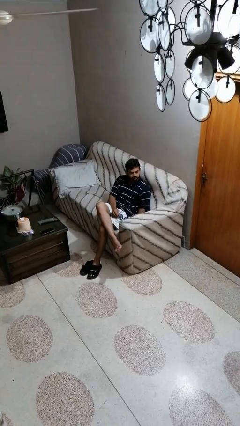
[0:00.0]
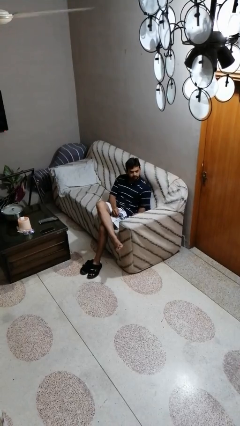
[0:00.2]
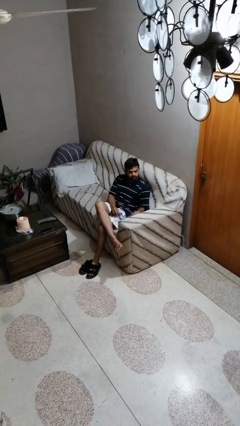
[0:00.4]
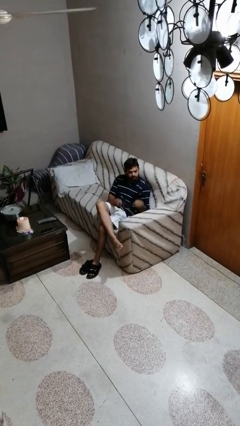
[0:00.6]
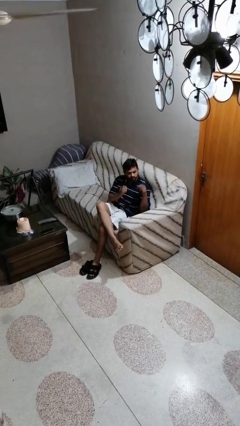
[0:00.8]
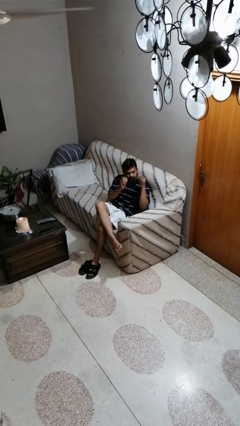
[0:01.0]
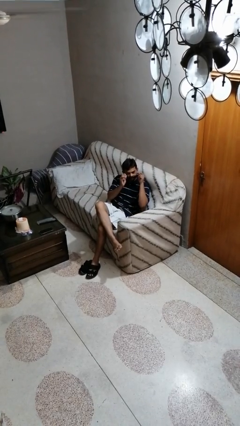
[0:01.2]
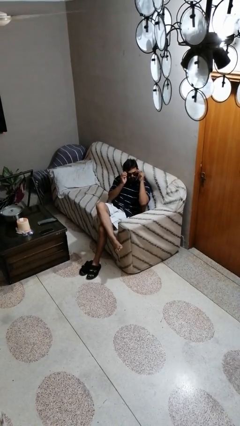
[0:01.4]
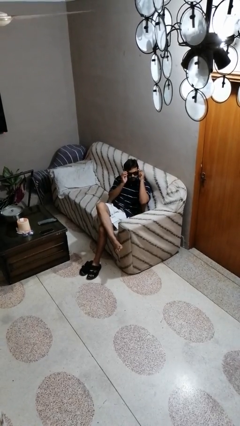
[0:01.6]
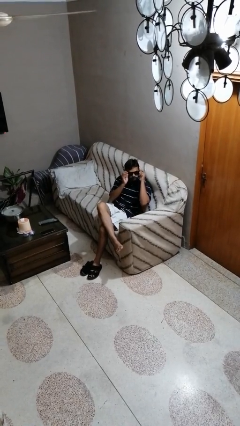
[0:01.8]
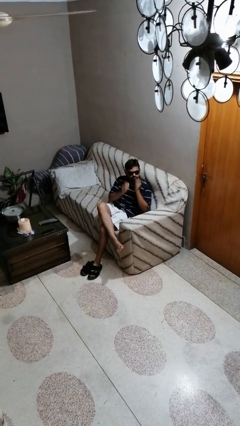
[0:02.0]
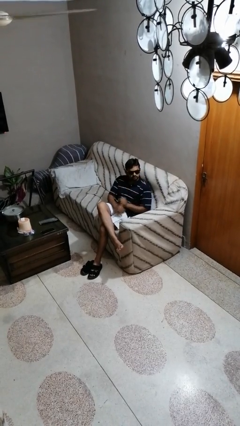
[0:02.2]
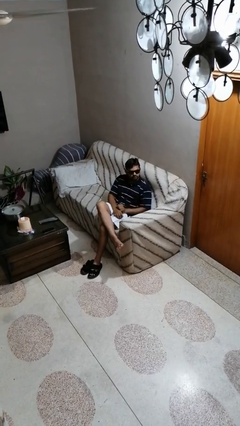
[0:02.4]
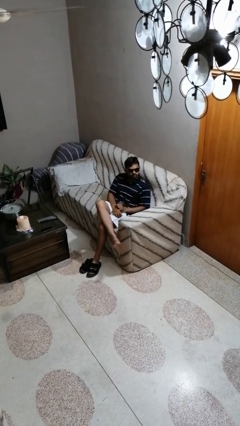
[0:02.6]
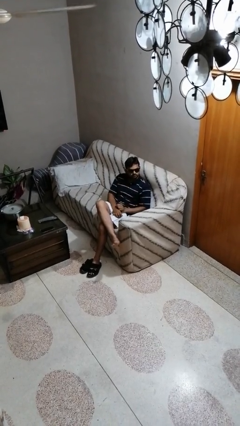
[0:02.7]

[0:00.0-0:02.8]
person puts on sunglasses

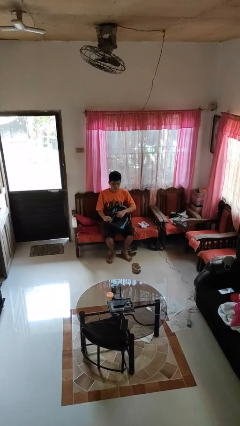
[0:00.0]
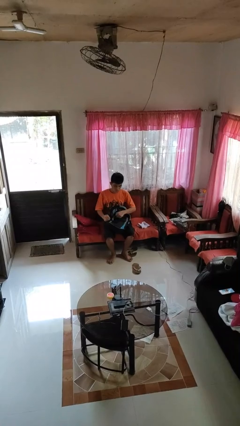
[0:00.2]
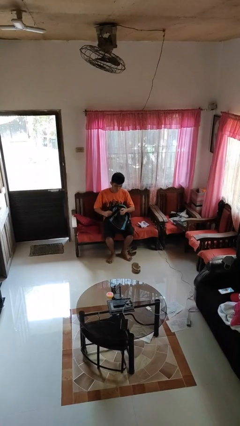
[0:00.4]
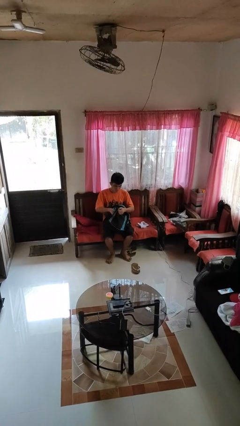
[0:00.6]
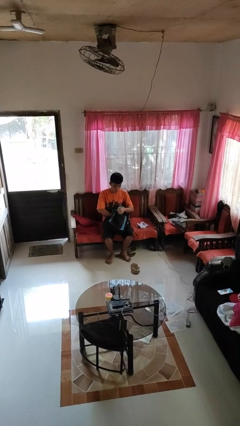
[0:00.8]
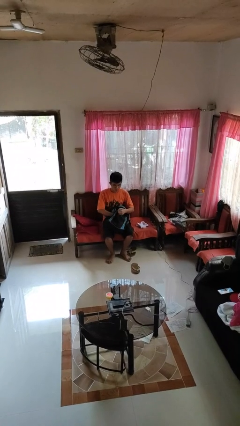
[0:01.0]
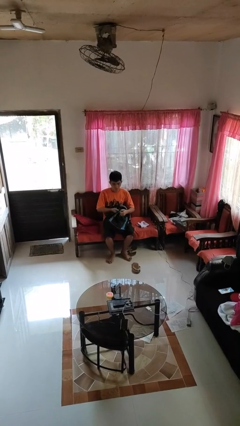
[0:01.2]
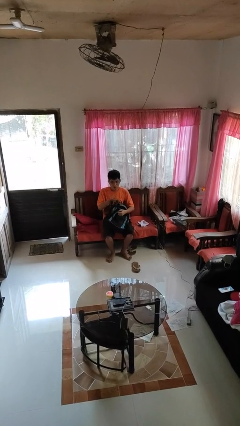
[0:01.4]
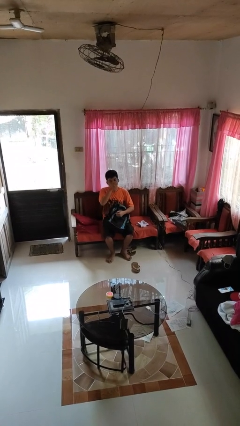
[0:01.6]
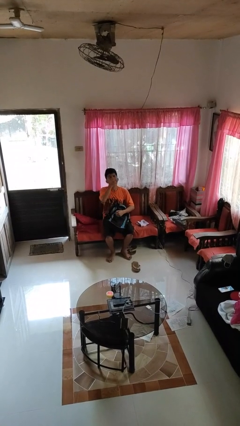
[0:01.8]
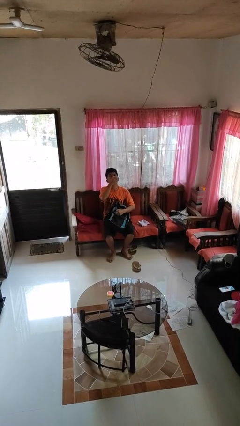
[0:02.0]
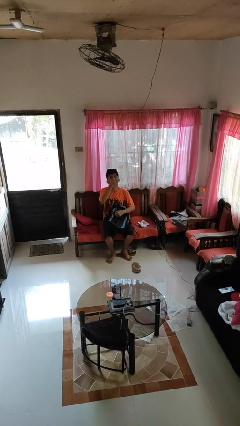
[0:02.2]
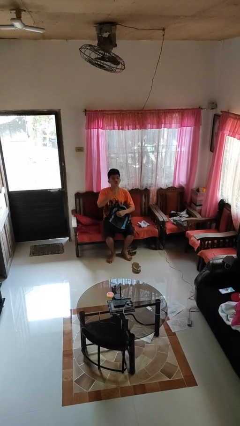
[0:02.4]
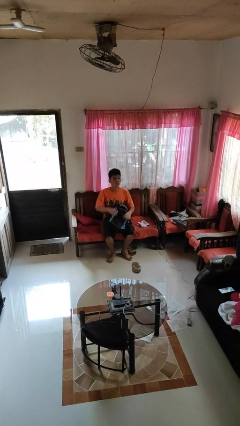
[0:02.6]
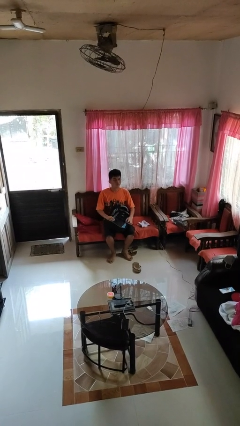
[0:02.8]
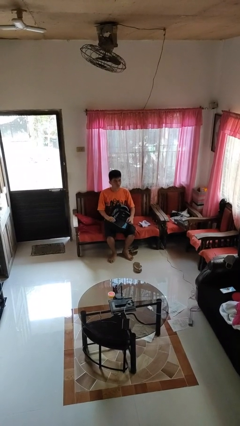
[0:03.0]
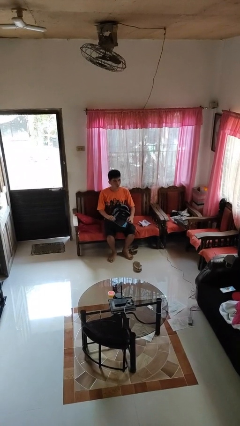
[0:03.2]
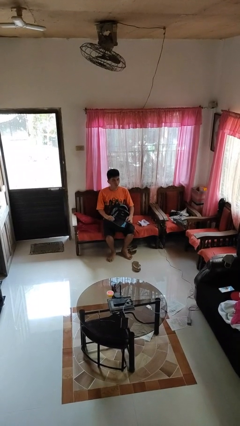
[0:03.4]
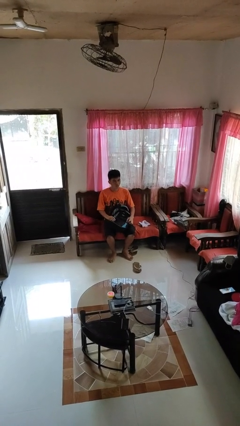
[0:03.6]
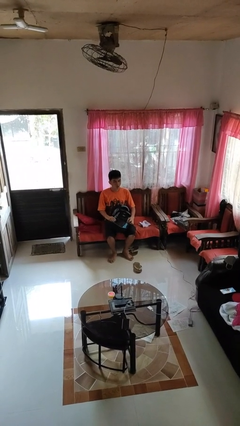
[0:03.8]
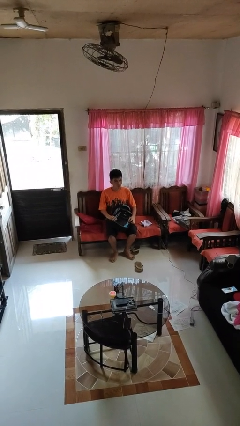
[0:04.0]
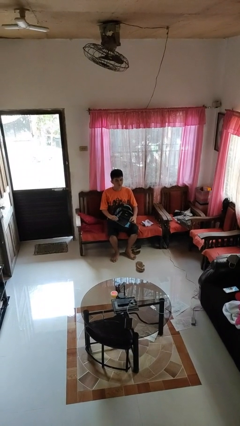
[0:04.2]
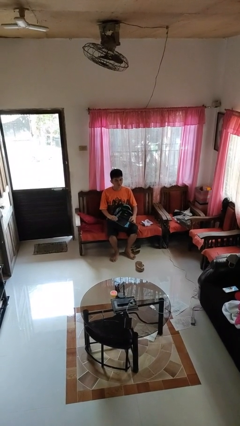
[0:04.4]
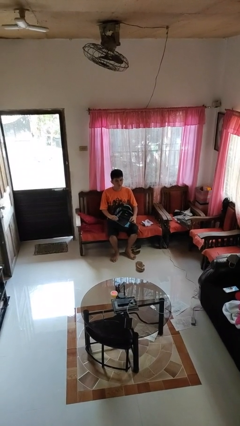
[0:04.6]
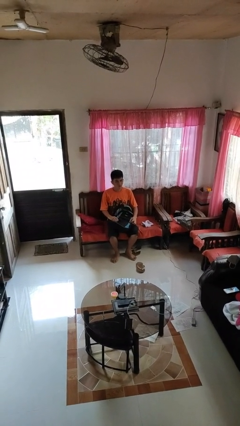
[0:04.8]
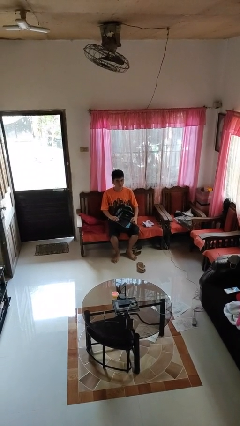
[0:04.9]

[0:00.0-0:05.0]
person eats snack from bag

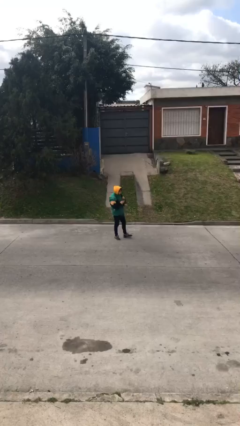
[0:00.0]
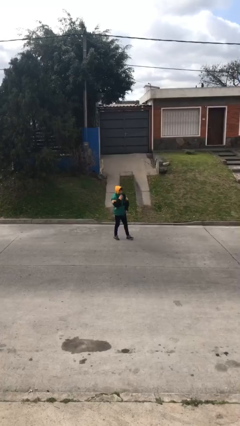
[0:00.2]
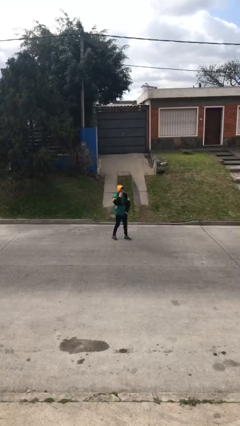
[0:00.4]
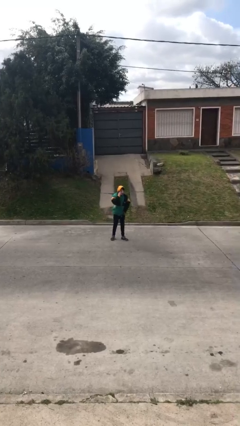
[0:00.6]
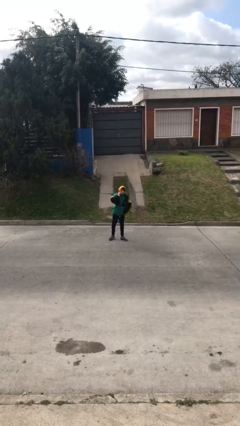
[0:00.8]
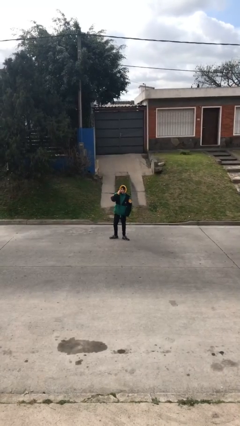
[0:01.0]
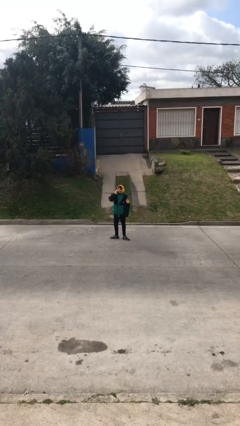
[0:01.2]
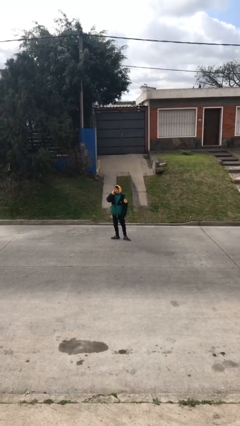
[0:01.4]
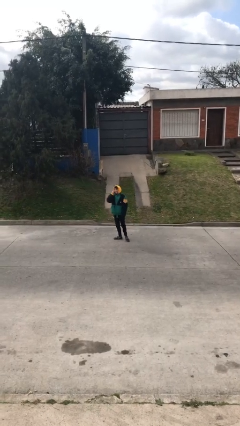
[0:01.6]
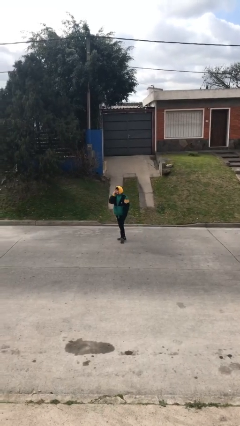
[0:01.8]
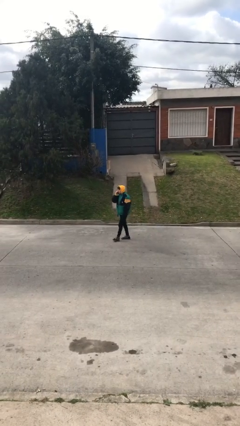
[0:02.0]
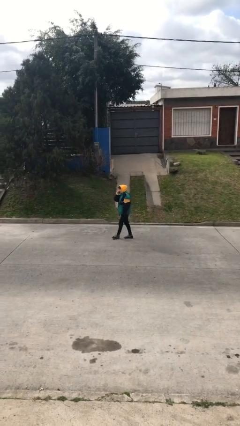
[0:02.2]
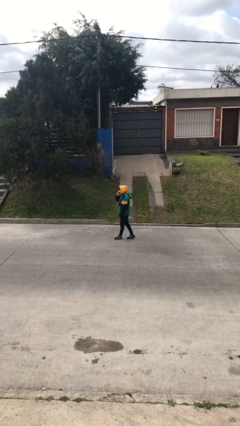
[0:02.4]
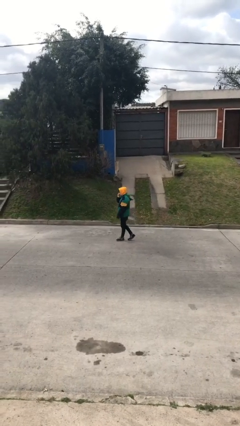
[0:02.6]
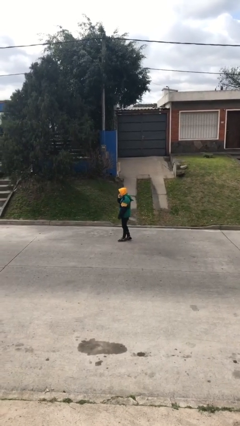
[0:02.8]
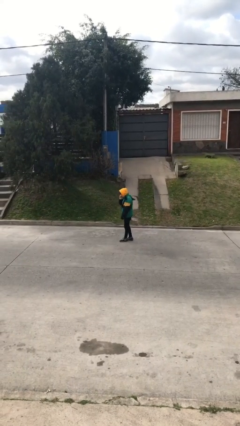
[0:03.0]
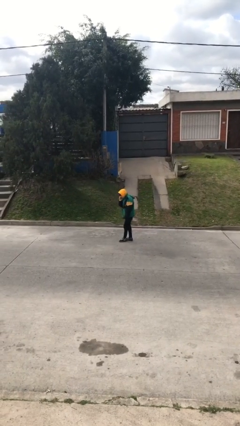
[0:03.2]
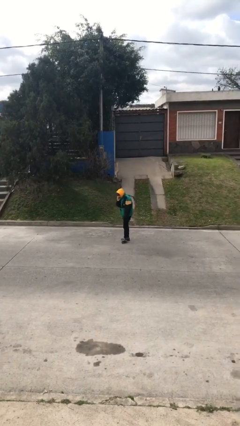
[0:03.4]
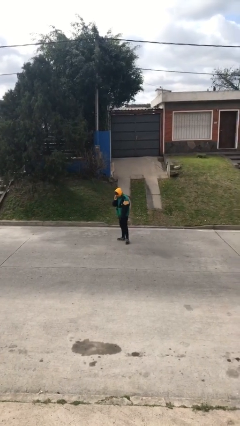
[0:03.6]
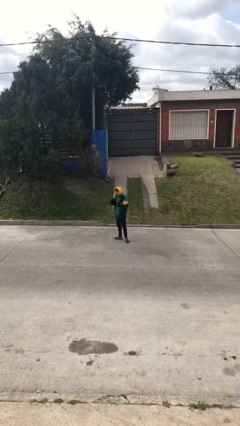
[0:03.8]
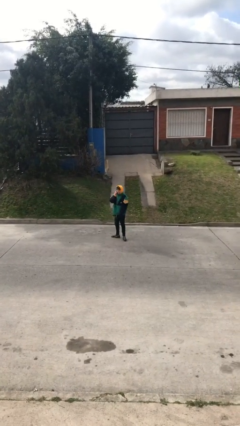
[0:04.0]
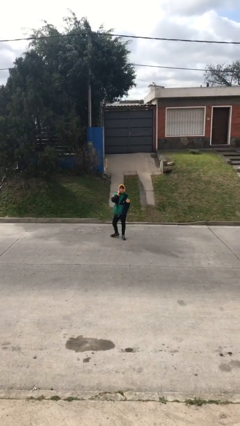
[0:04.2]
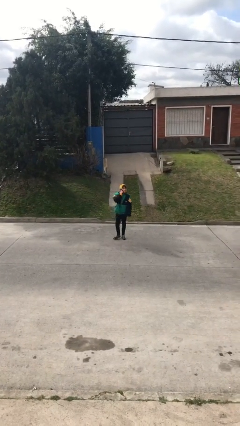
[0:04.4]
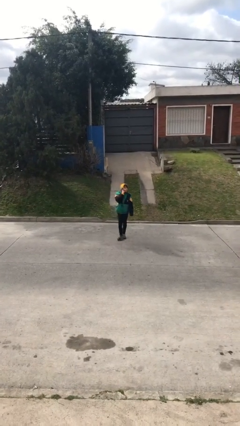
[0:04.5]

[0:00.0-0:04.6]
person talks on phone

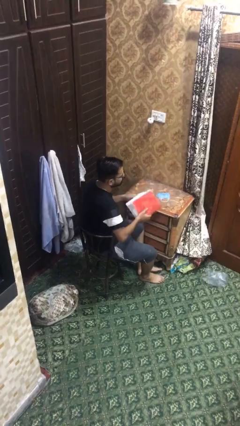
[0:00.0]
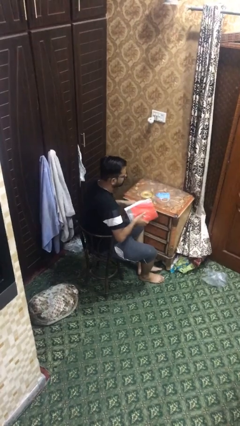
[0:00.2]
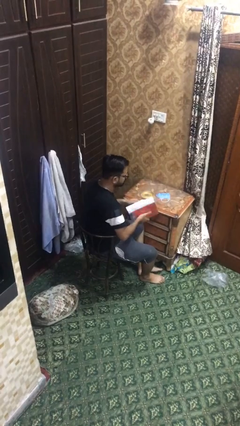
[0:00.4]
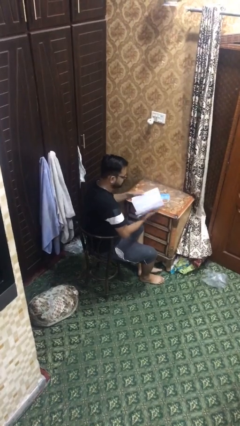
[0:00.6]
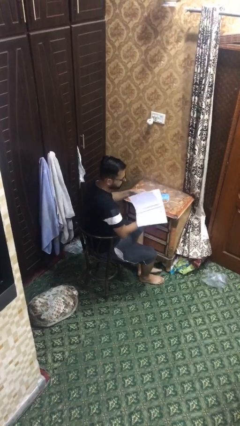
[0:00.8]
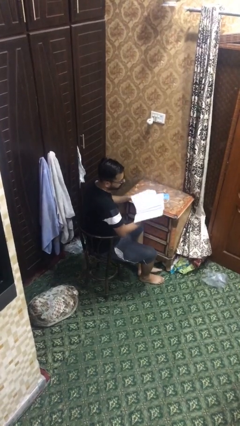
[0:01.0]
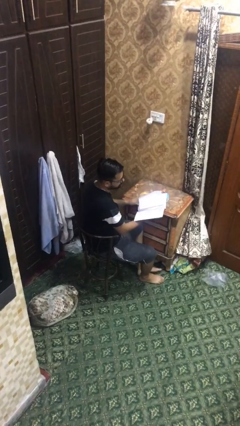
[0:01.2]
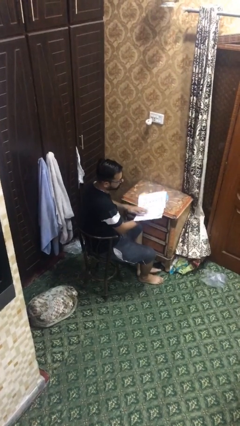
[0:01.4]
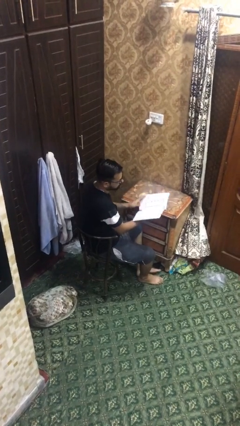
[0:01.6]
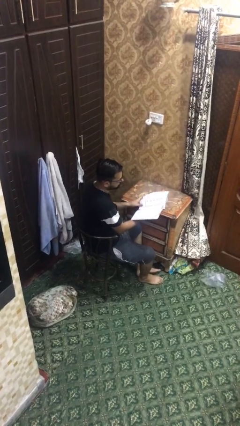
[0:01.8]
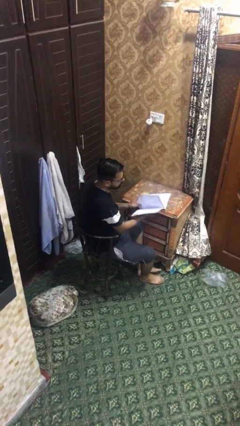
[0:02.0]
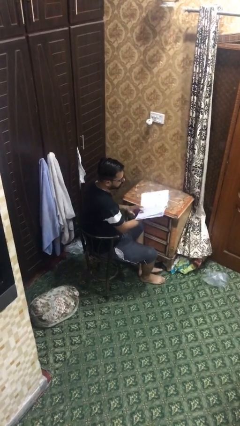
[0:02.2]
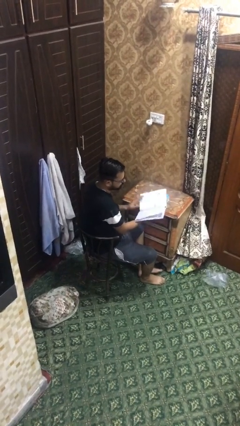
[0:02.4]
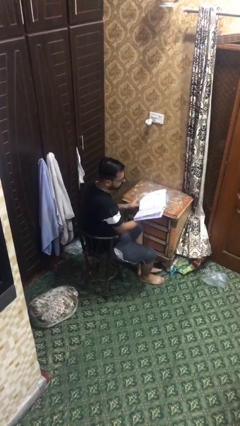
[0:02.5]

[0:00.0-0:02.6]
person reads document

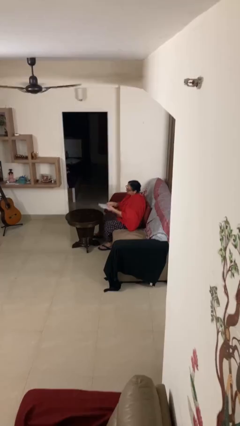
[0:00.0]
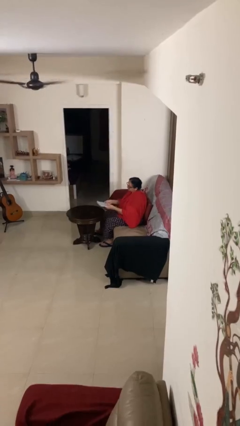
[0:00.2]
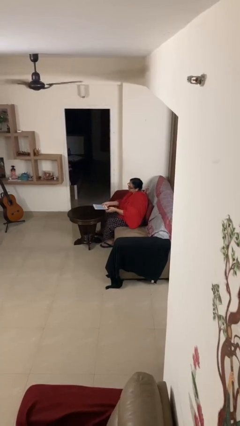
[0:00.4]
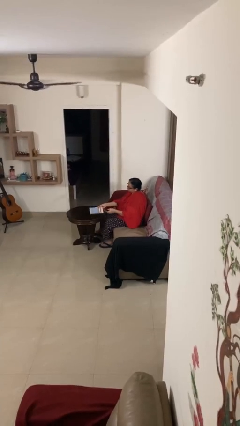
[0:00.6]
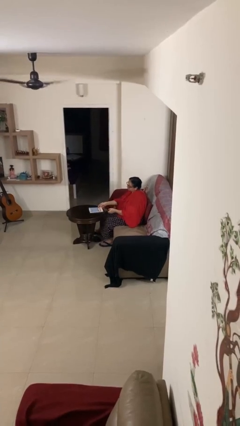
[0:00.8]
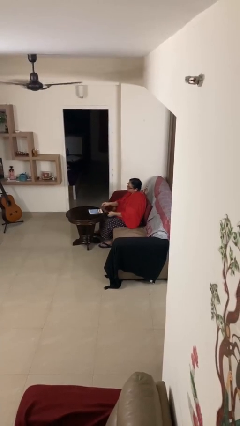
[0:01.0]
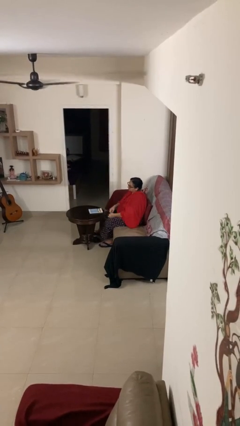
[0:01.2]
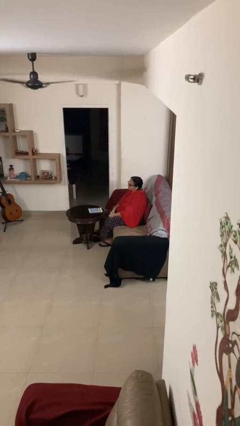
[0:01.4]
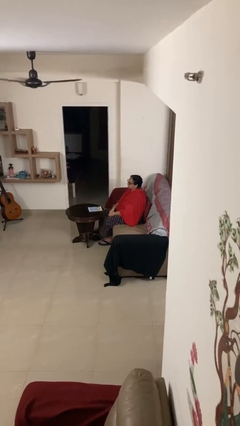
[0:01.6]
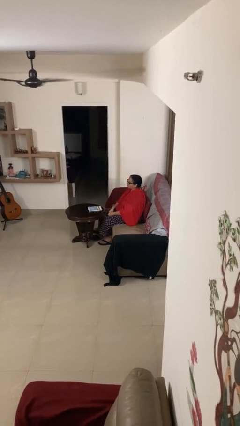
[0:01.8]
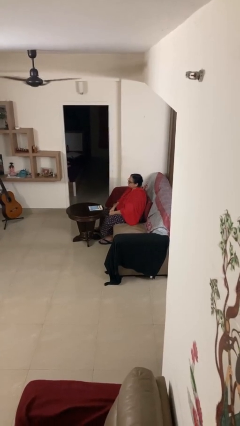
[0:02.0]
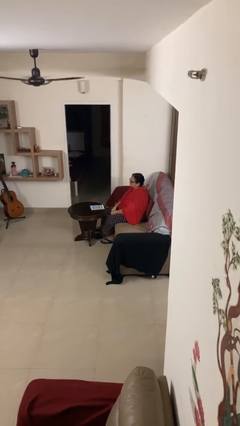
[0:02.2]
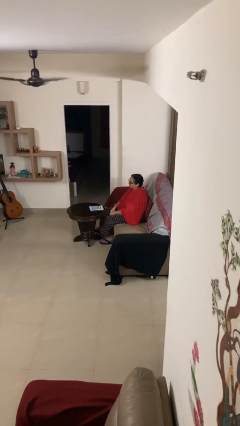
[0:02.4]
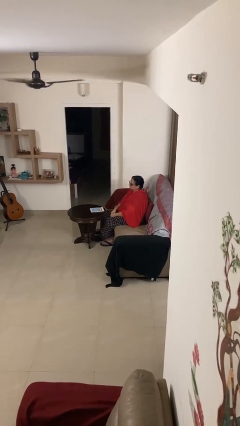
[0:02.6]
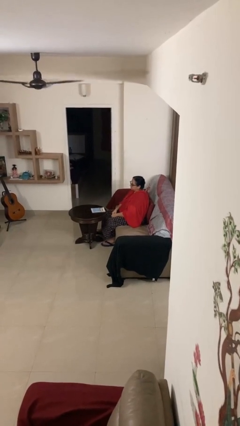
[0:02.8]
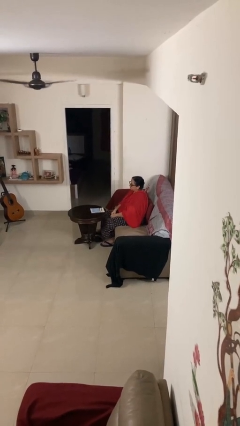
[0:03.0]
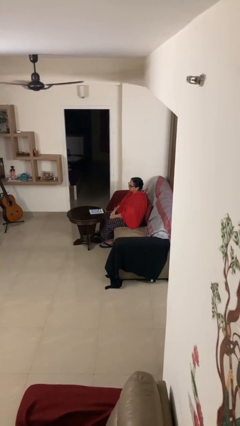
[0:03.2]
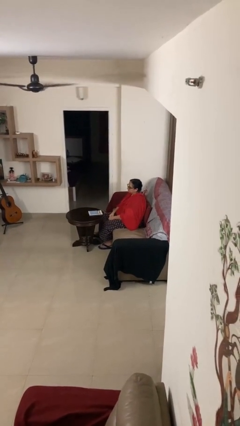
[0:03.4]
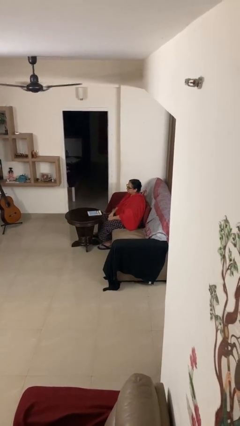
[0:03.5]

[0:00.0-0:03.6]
person puts down object on table
